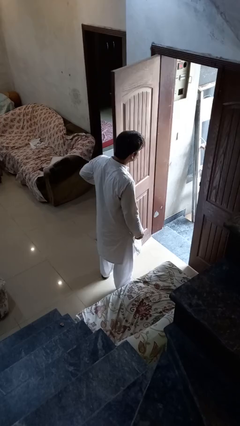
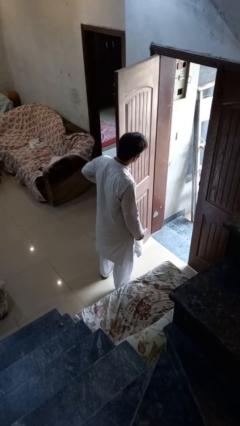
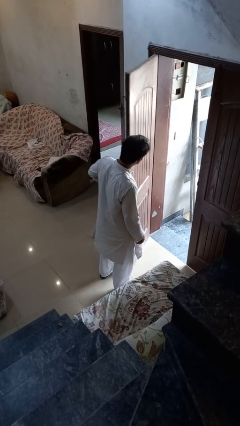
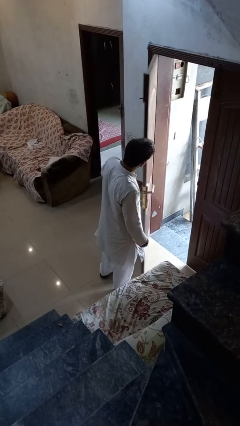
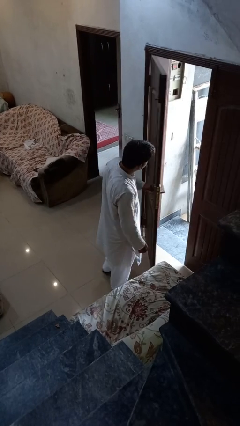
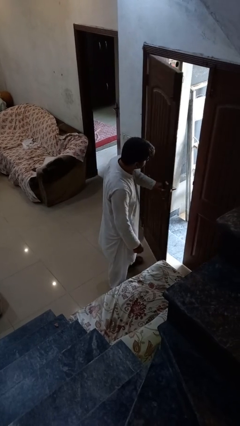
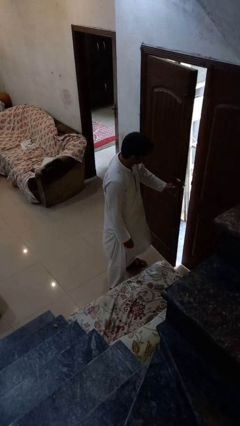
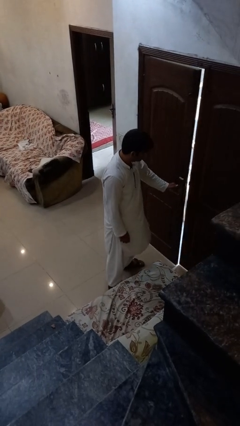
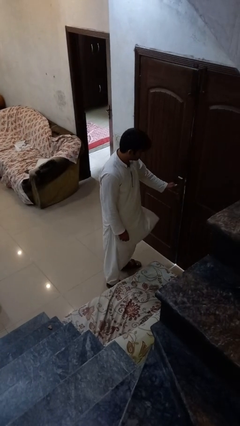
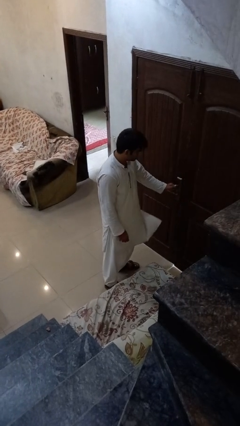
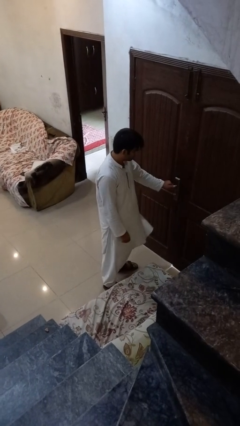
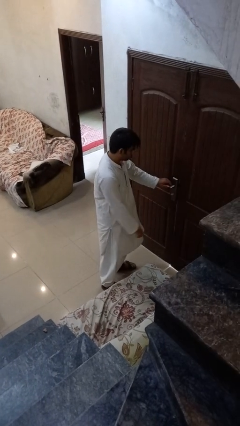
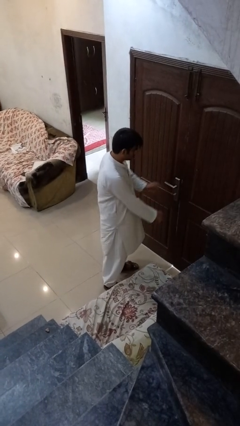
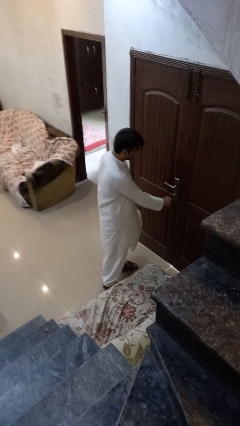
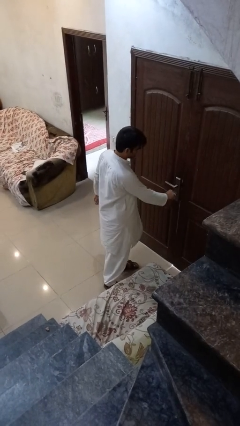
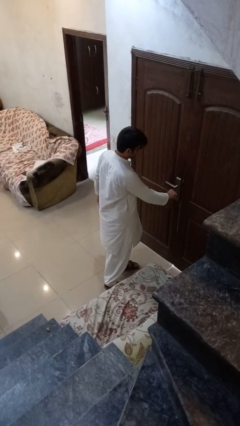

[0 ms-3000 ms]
person closes facility door

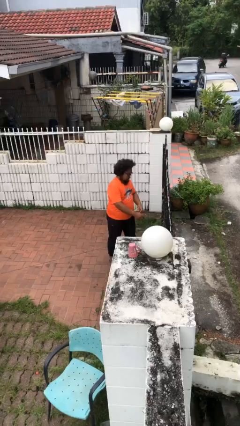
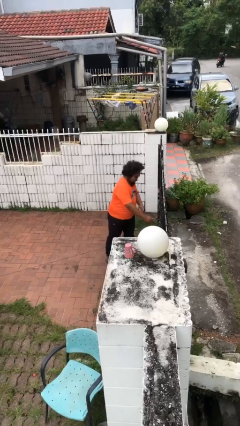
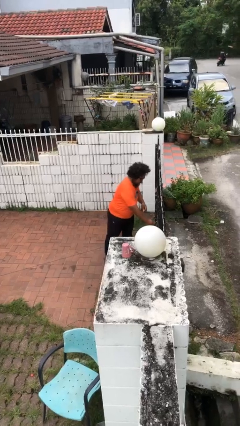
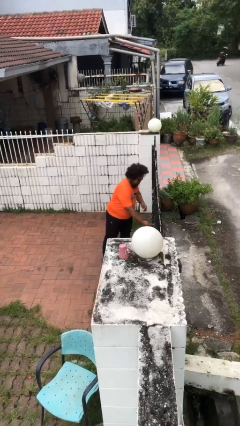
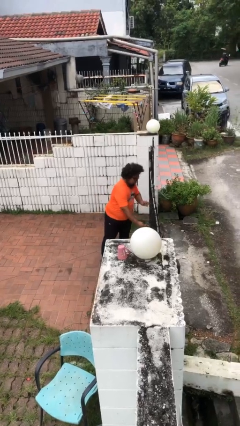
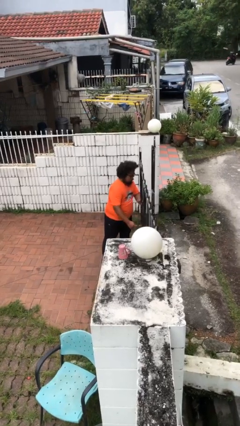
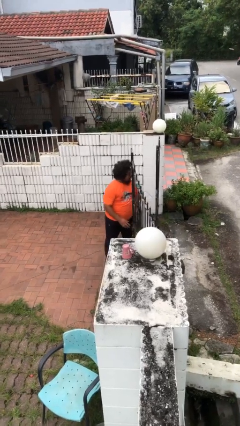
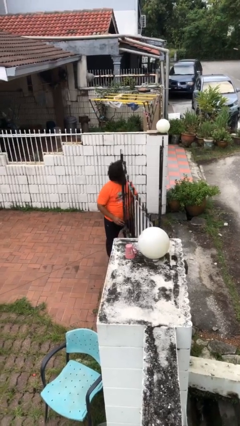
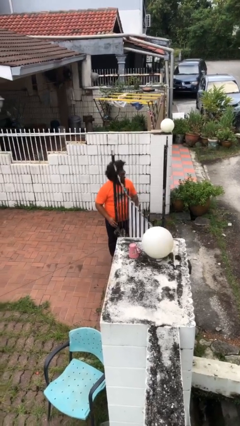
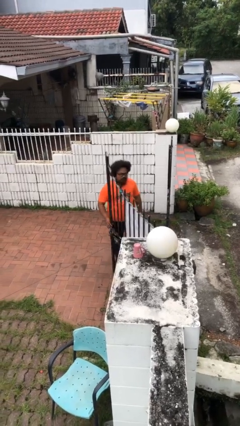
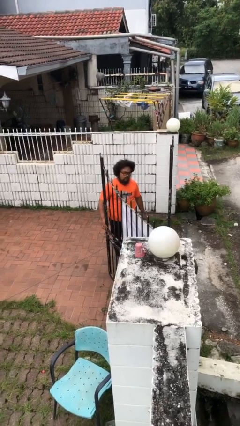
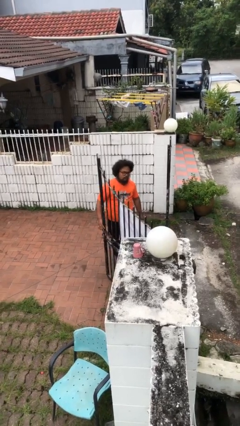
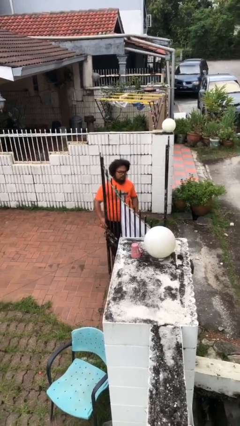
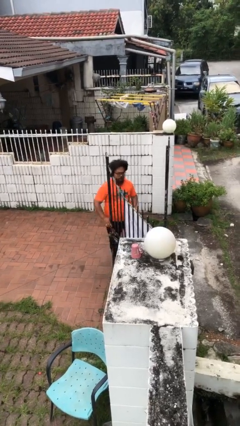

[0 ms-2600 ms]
person opens facility door

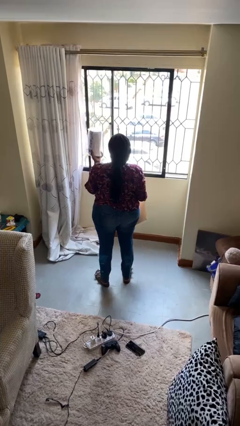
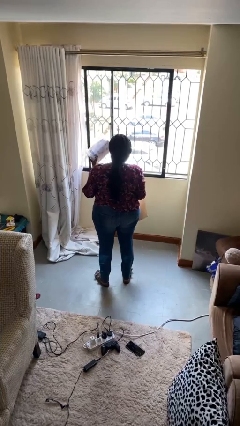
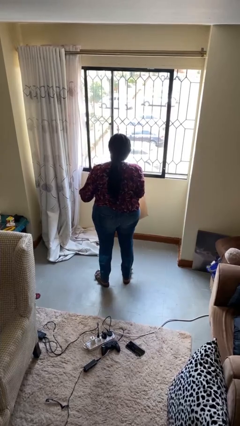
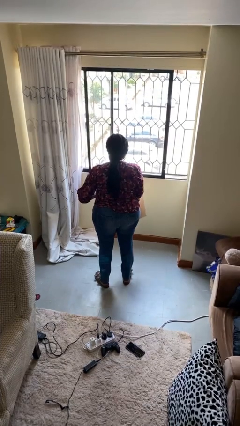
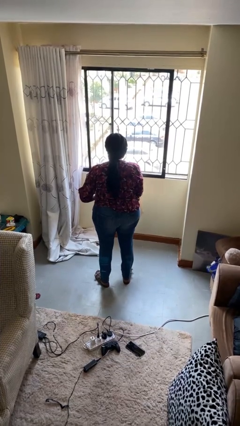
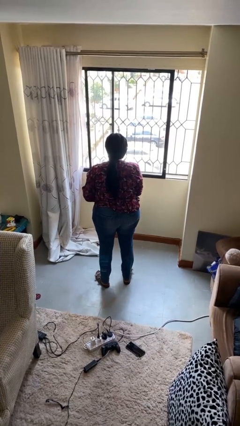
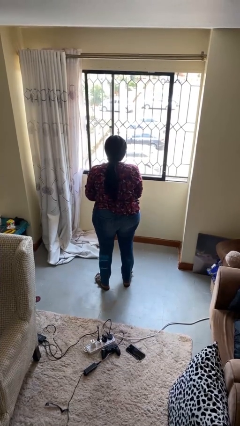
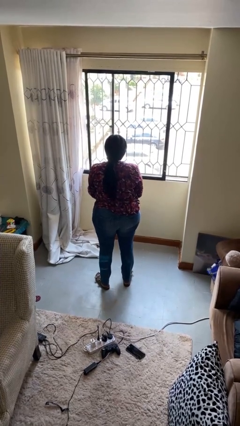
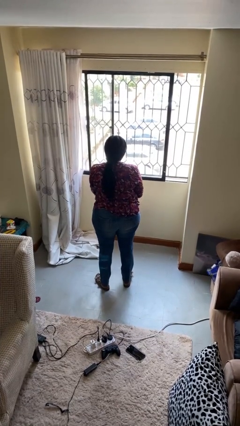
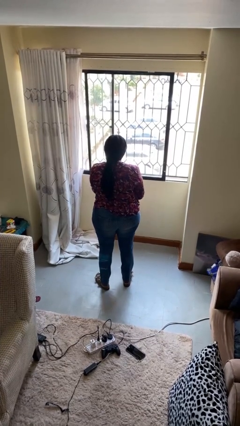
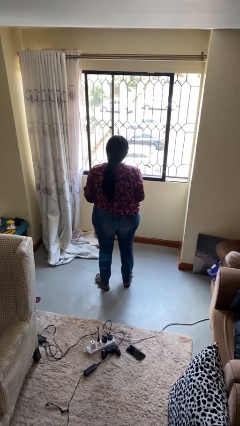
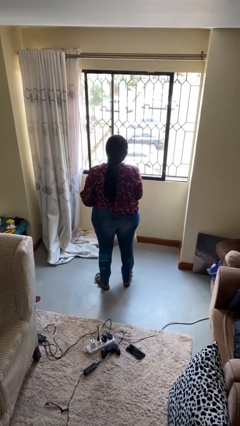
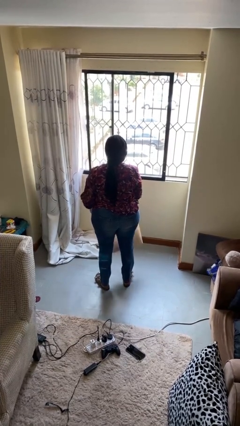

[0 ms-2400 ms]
person puts object into bag

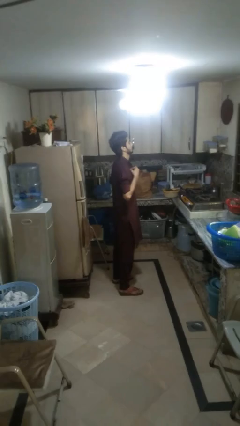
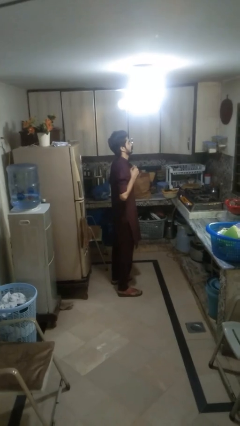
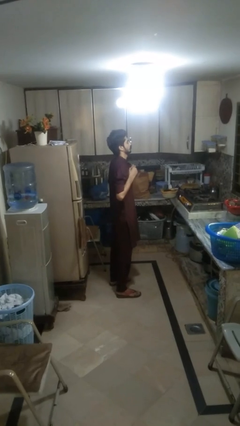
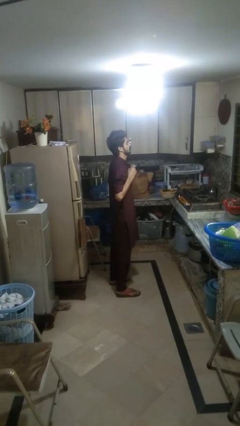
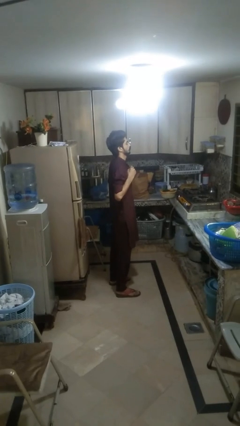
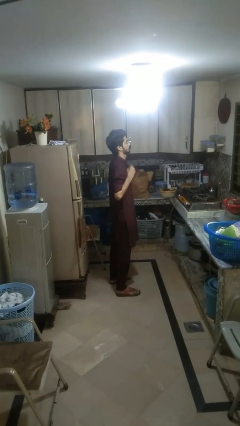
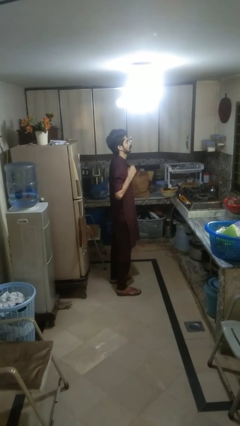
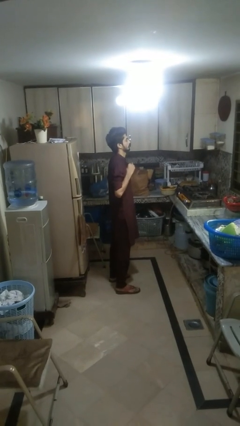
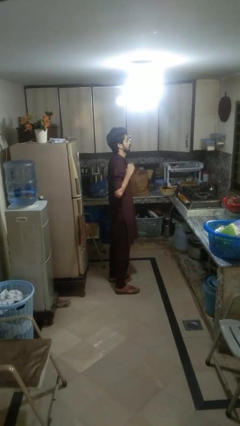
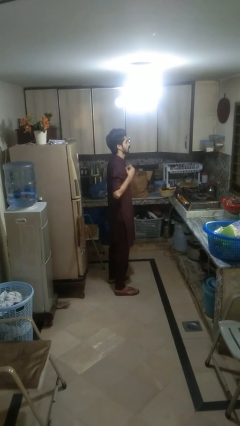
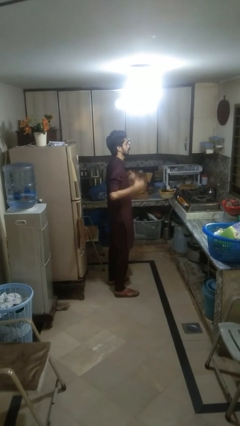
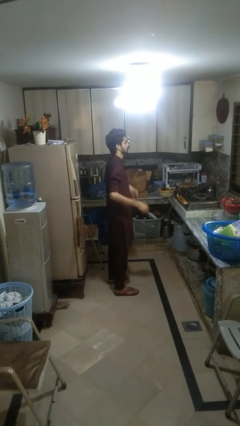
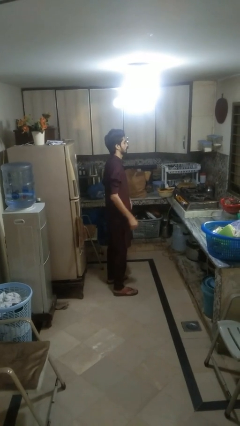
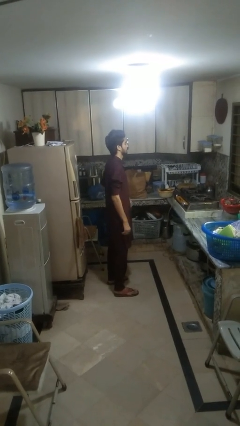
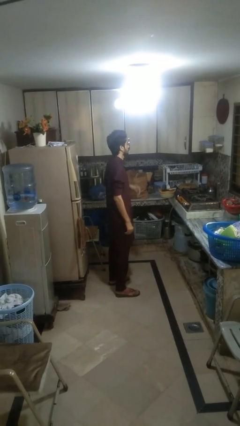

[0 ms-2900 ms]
person buttons shirt

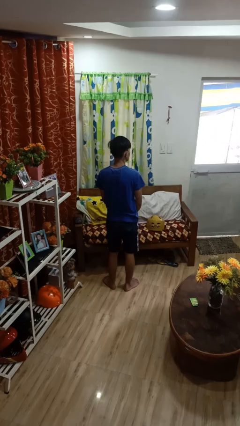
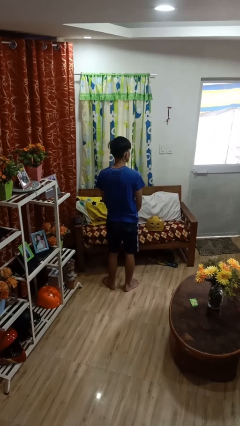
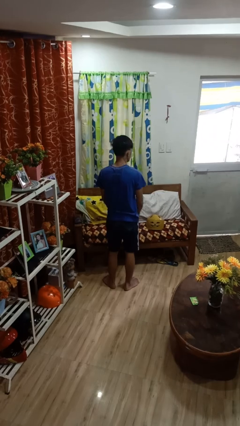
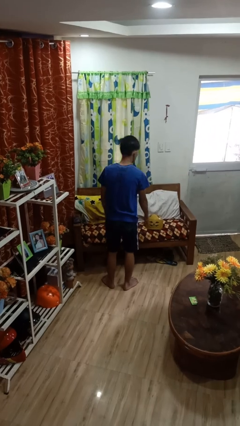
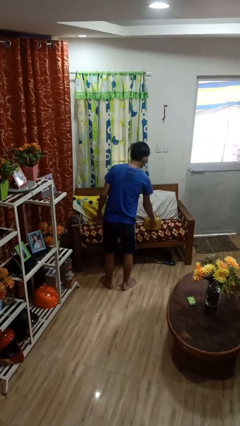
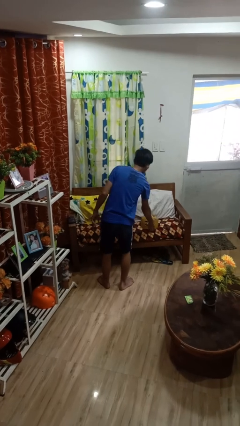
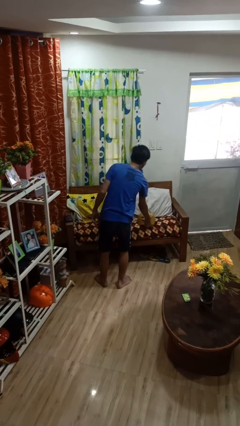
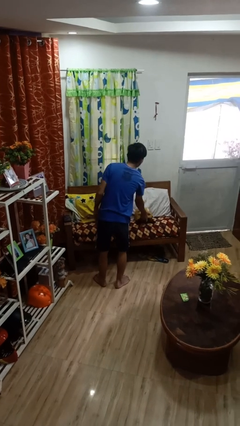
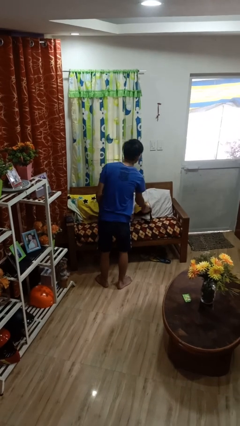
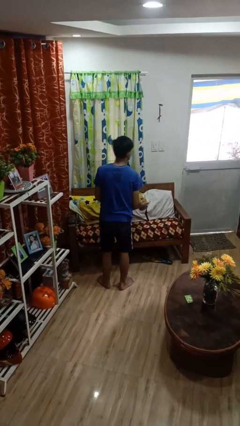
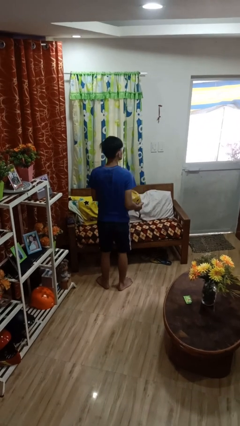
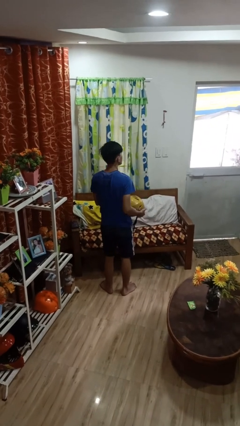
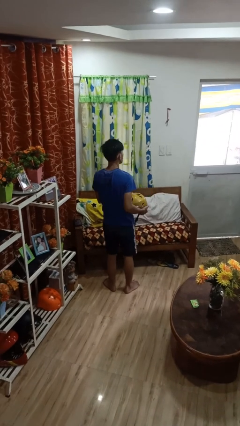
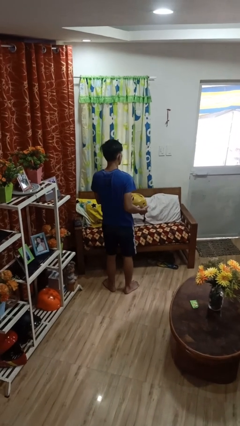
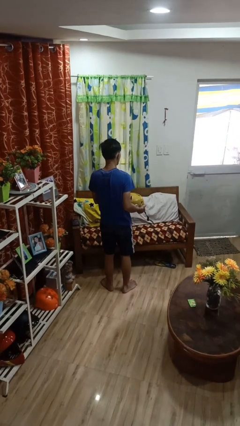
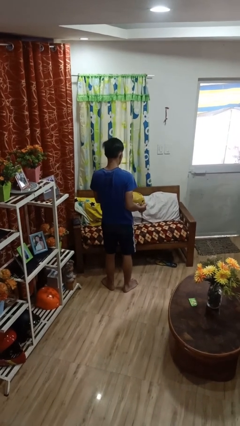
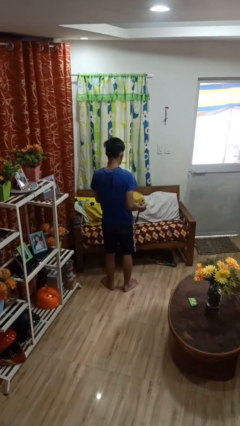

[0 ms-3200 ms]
person picks up object from couch

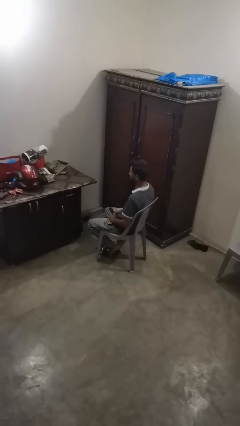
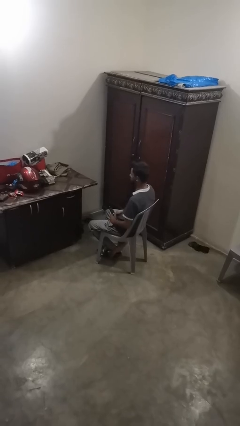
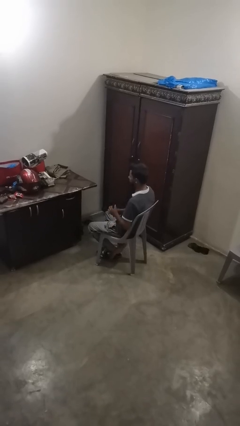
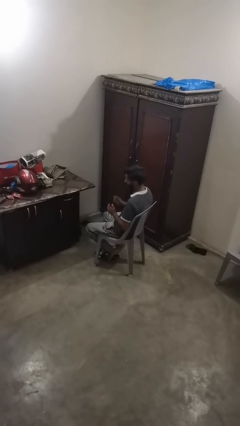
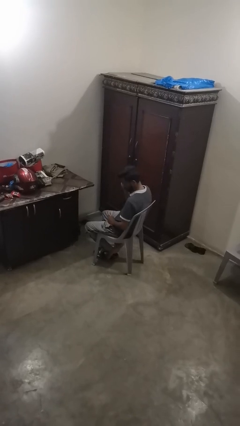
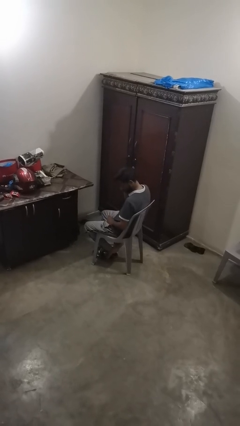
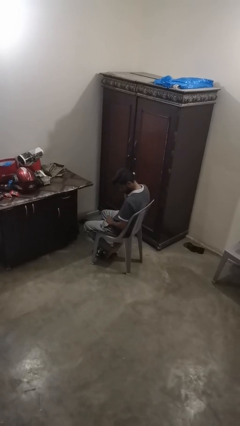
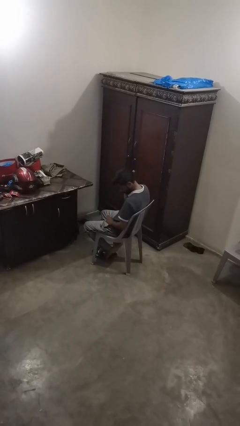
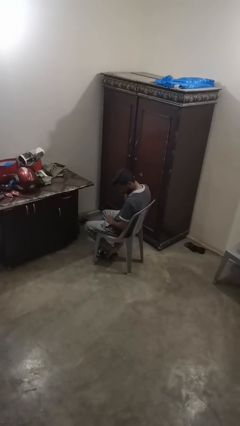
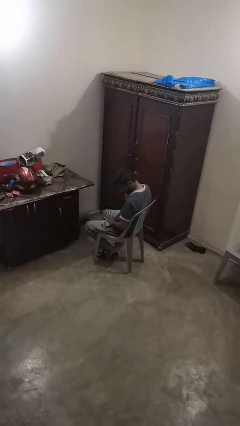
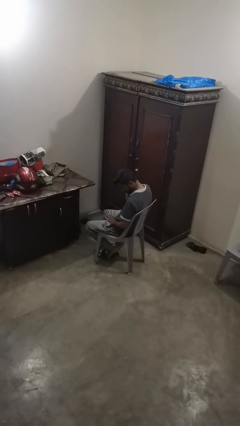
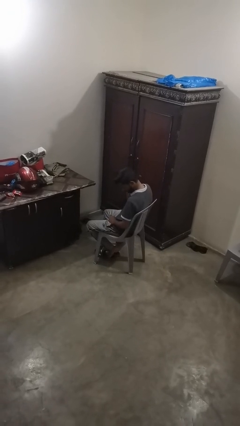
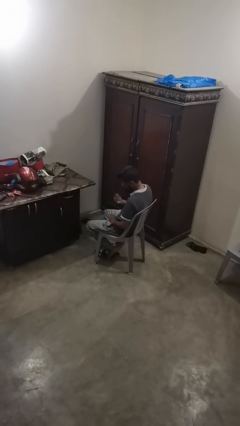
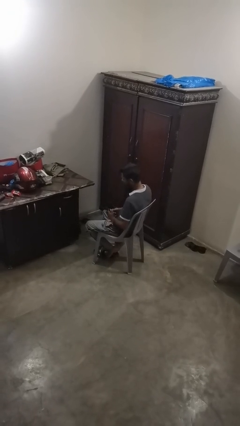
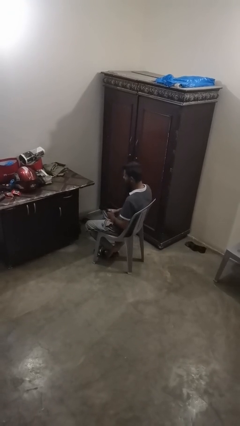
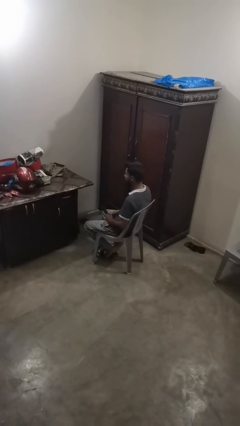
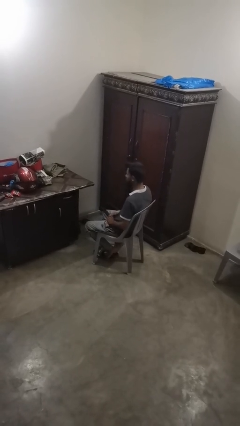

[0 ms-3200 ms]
person brushes hair

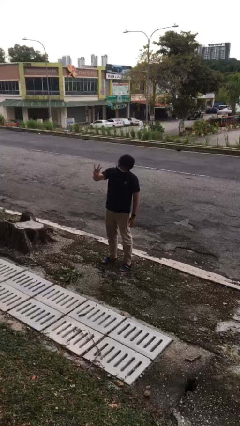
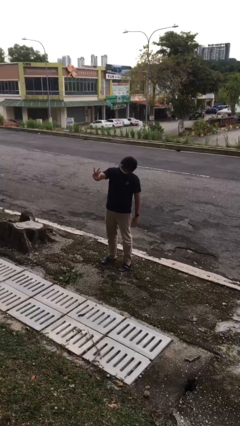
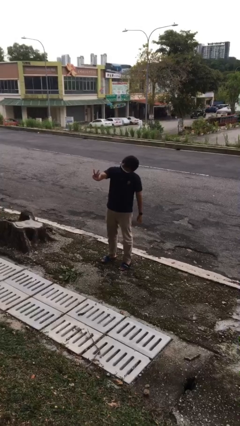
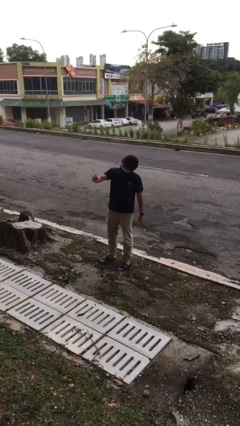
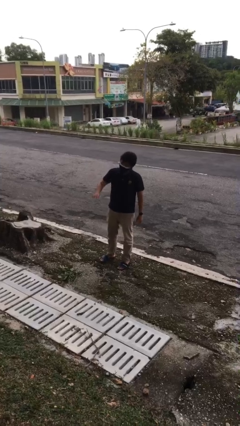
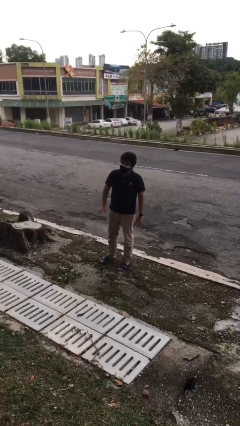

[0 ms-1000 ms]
person gestures number three
